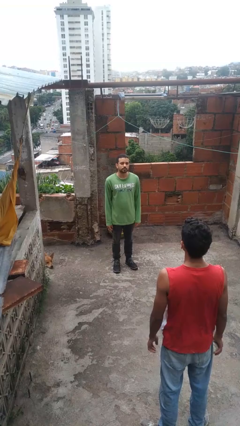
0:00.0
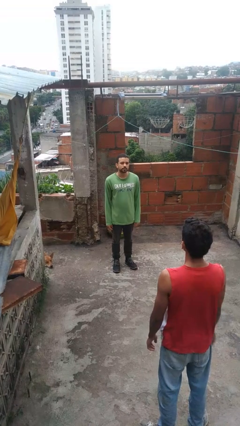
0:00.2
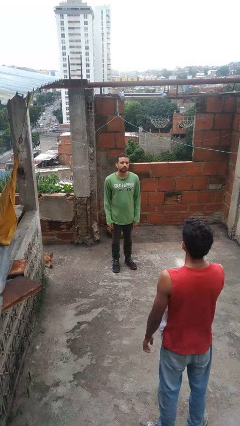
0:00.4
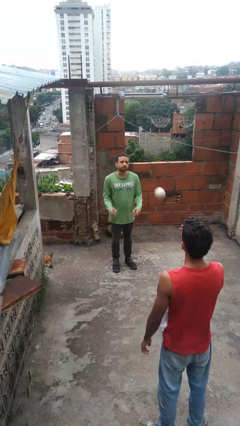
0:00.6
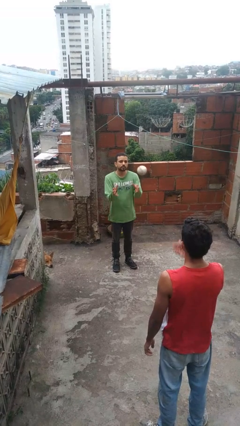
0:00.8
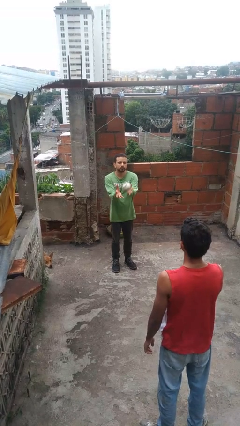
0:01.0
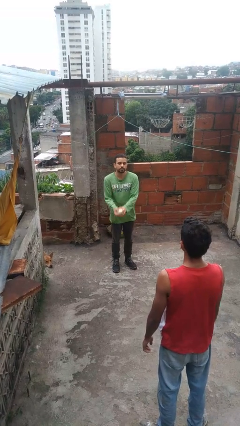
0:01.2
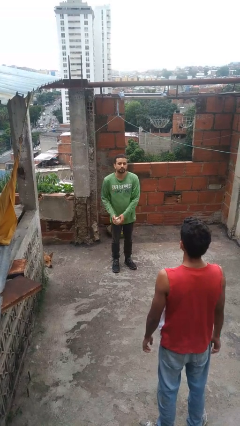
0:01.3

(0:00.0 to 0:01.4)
person catches object from person

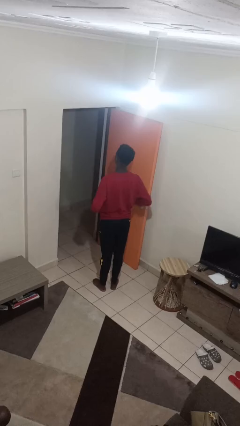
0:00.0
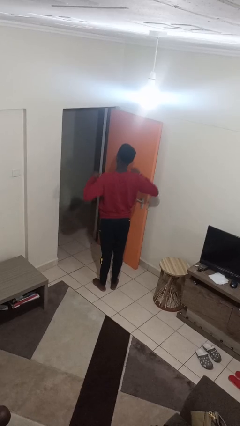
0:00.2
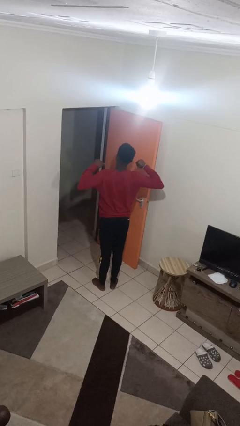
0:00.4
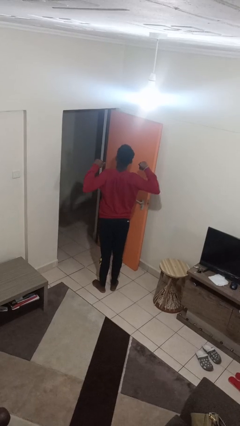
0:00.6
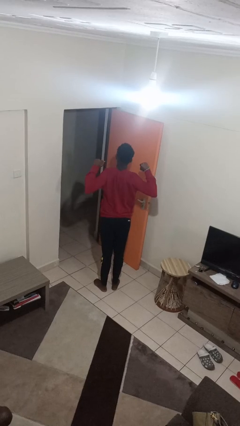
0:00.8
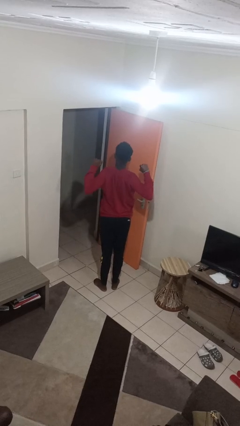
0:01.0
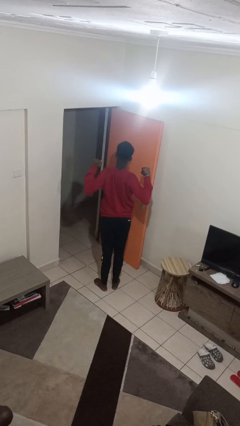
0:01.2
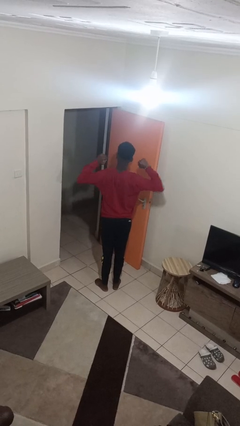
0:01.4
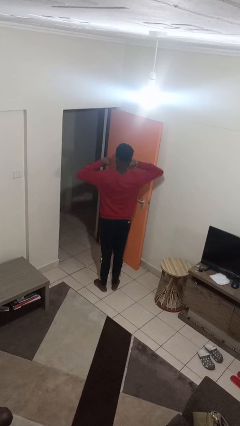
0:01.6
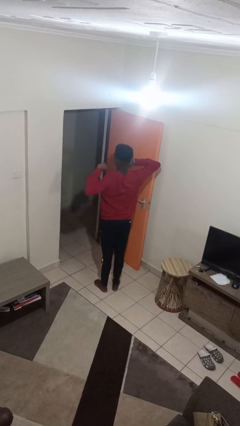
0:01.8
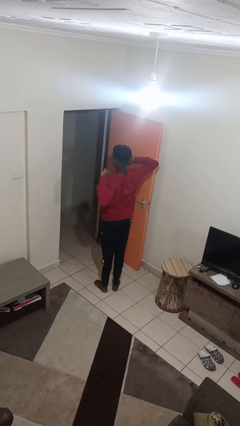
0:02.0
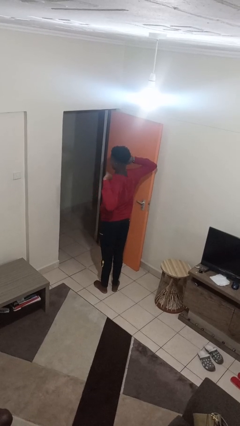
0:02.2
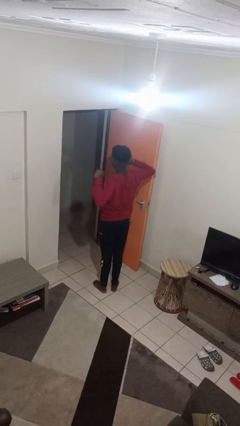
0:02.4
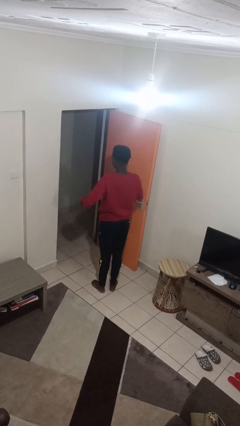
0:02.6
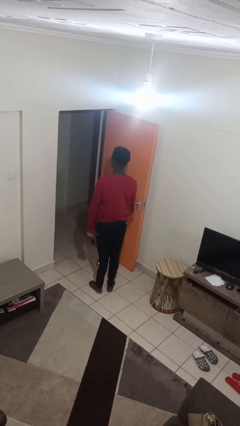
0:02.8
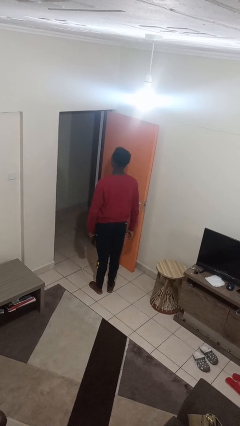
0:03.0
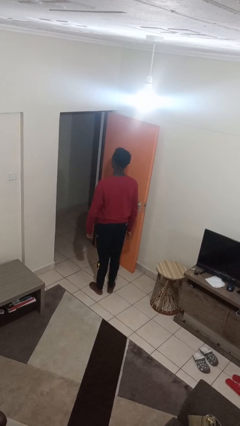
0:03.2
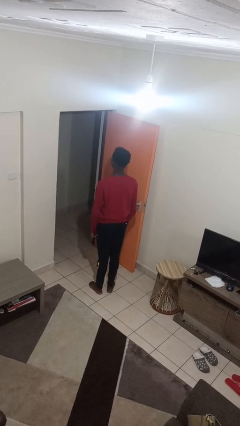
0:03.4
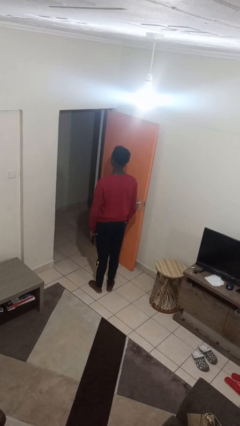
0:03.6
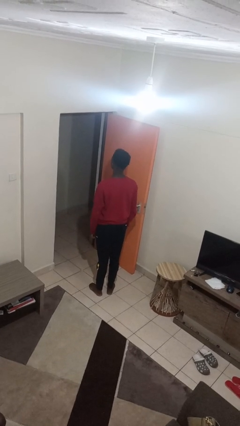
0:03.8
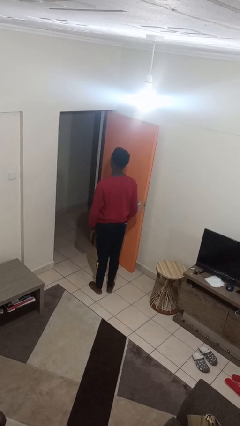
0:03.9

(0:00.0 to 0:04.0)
person stretches arms to side

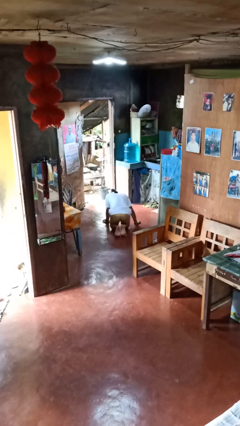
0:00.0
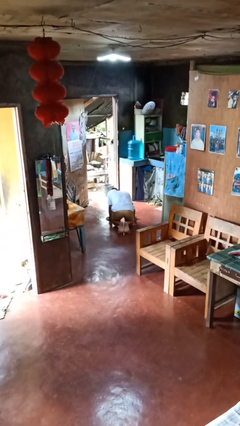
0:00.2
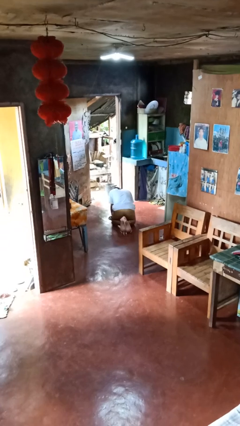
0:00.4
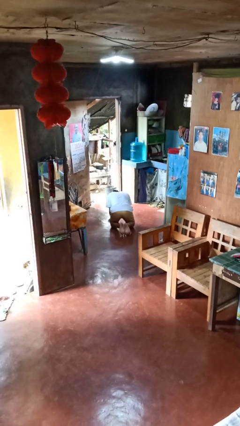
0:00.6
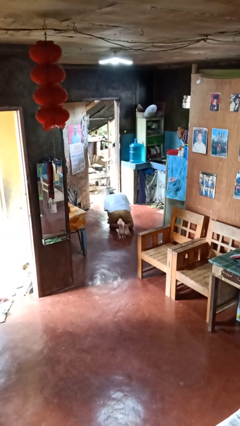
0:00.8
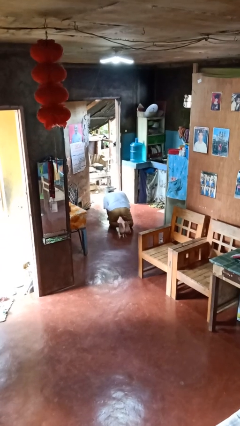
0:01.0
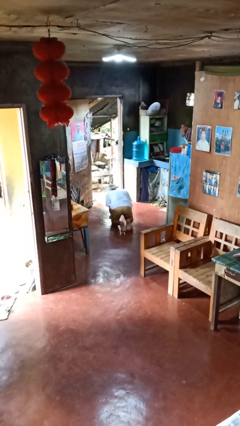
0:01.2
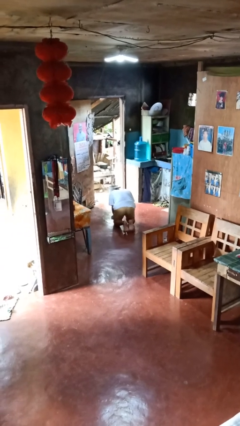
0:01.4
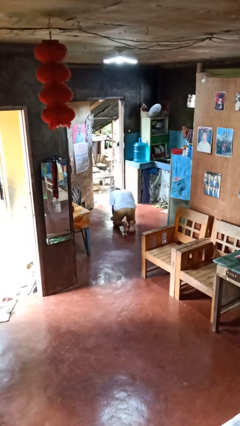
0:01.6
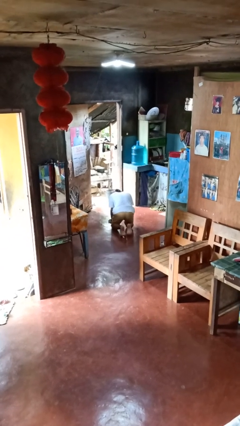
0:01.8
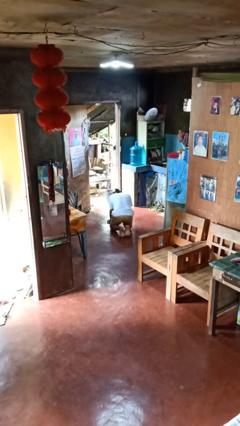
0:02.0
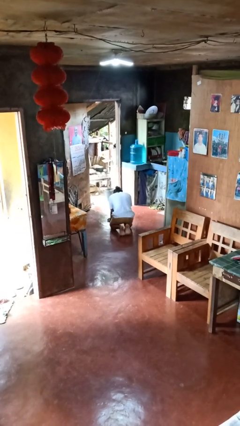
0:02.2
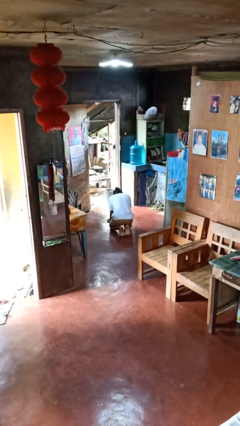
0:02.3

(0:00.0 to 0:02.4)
person crawls

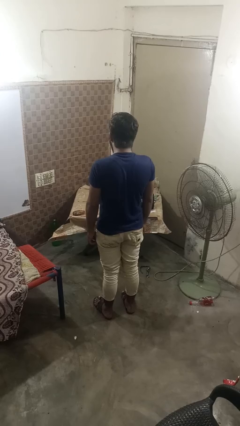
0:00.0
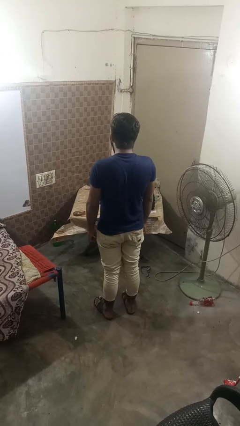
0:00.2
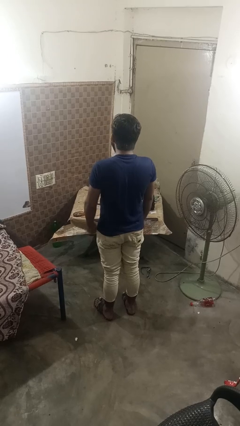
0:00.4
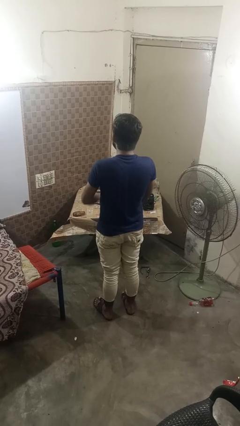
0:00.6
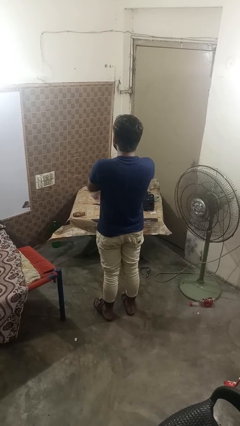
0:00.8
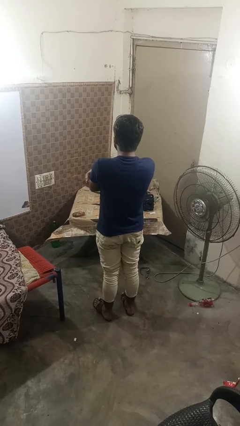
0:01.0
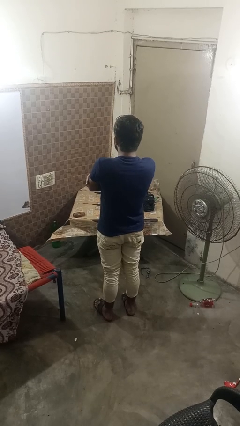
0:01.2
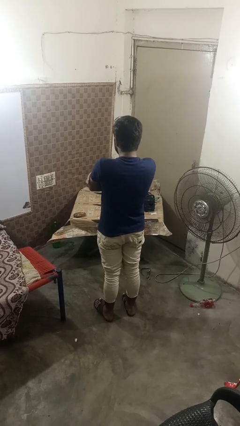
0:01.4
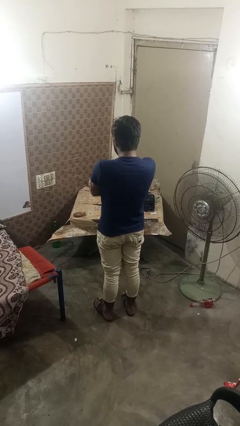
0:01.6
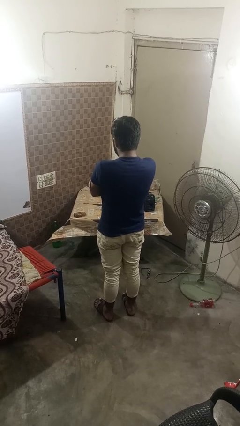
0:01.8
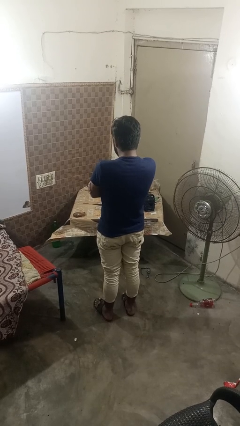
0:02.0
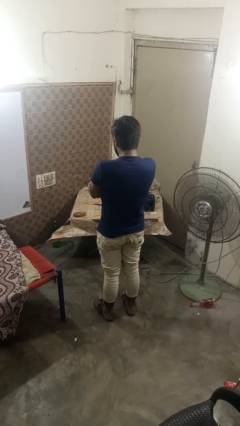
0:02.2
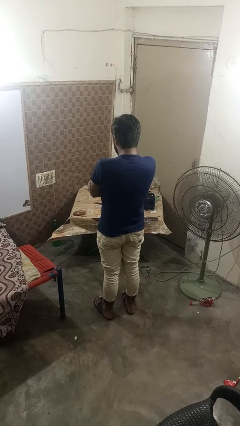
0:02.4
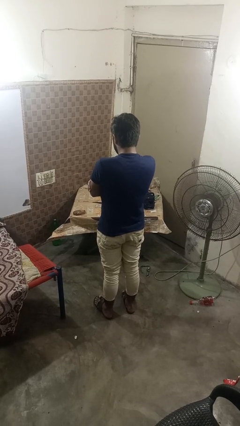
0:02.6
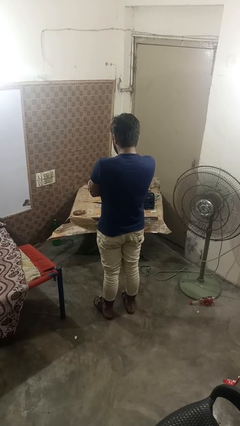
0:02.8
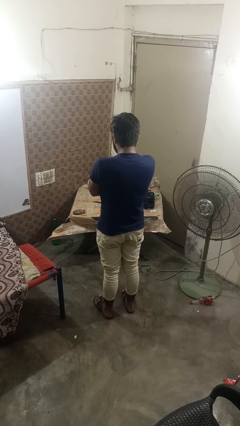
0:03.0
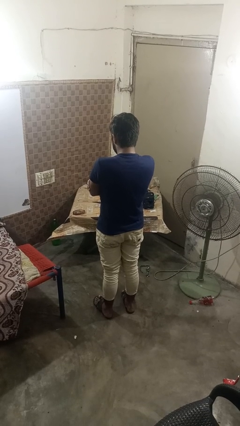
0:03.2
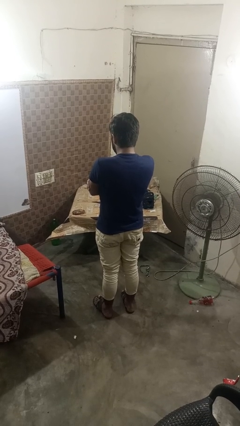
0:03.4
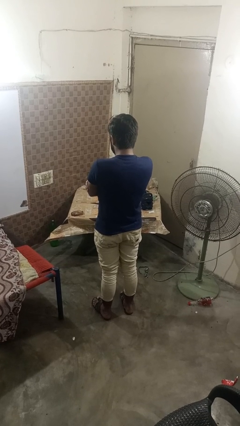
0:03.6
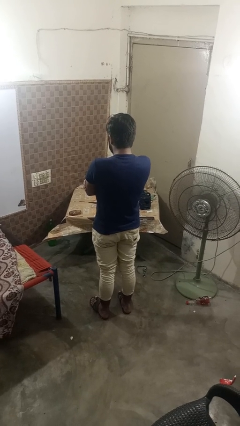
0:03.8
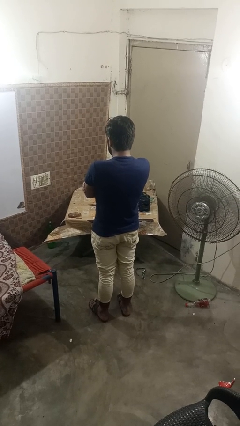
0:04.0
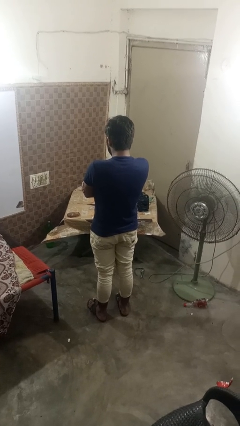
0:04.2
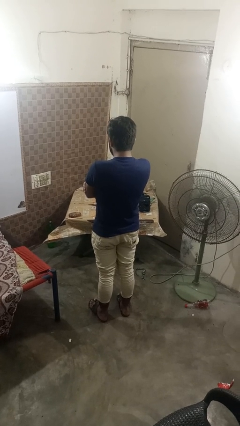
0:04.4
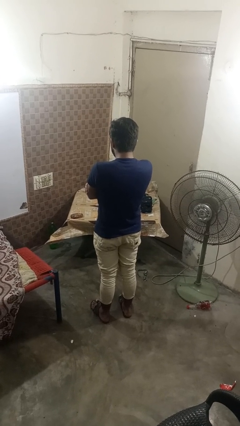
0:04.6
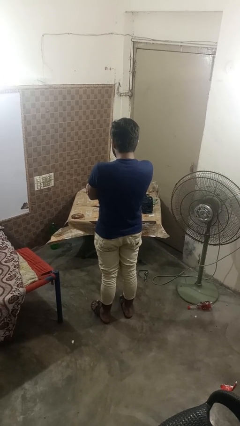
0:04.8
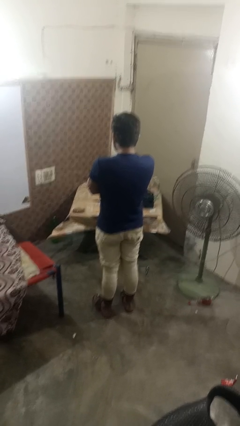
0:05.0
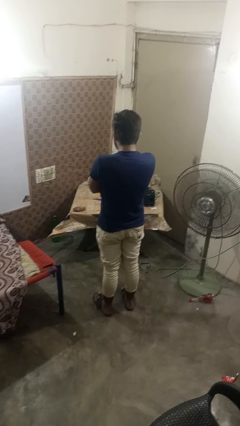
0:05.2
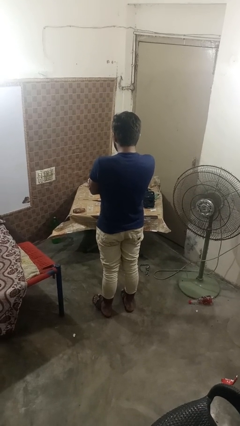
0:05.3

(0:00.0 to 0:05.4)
person crosses arms

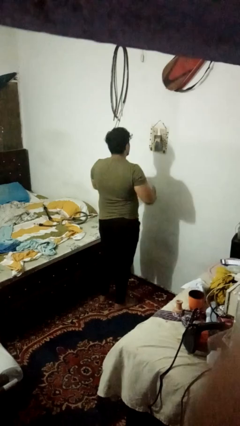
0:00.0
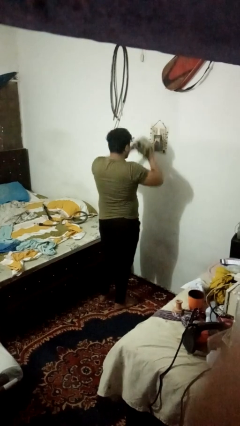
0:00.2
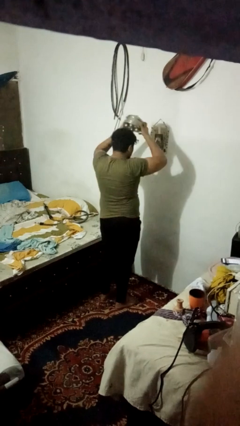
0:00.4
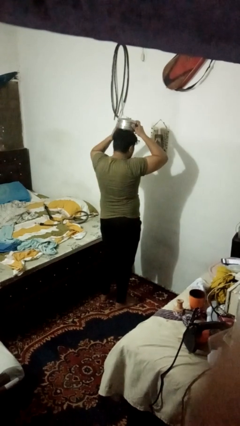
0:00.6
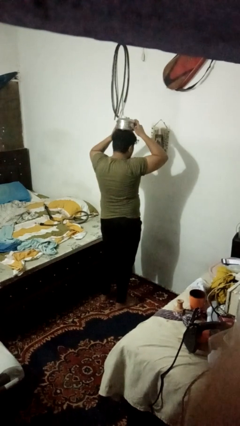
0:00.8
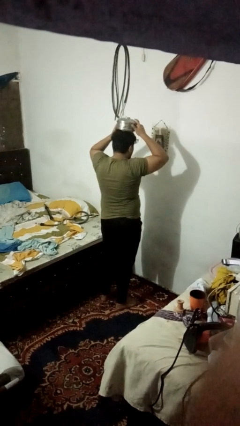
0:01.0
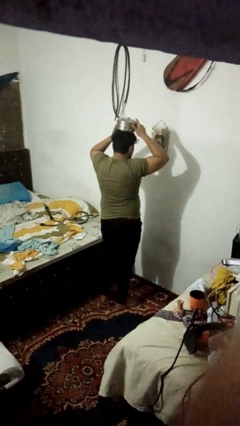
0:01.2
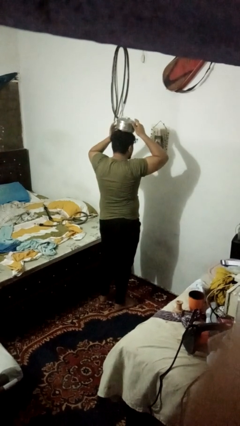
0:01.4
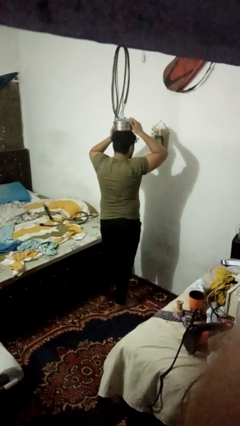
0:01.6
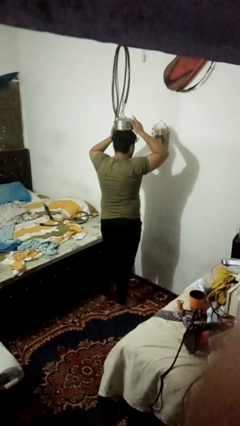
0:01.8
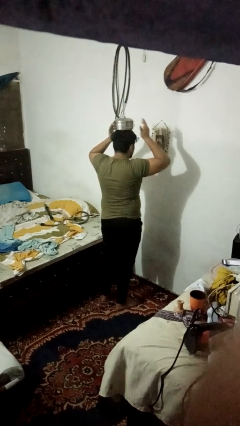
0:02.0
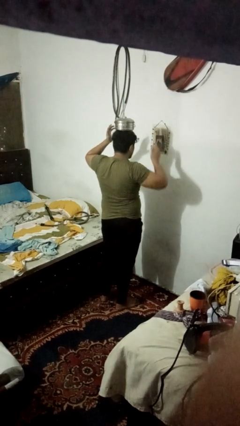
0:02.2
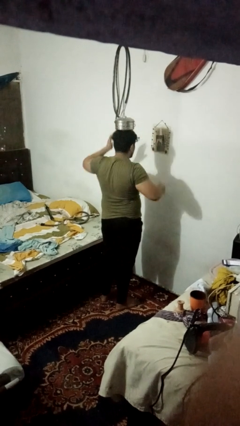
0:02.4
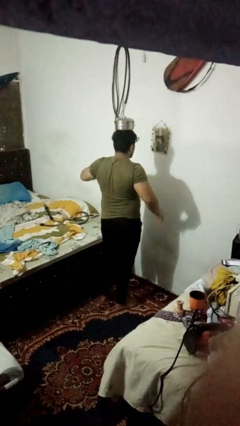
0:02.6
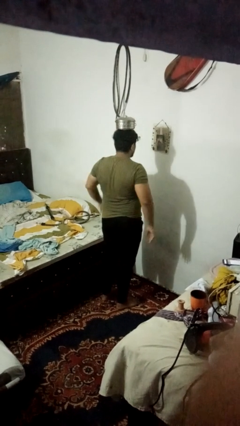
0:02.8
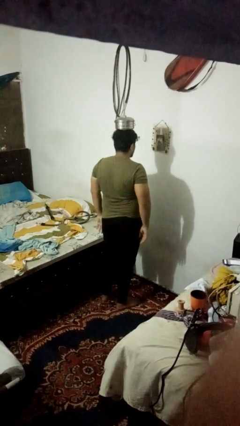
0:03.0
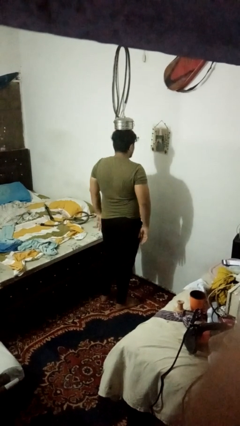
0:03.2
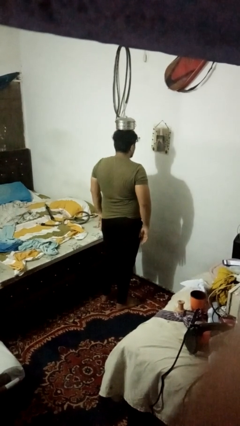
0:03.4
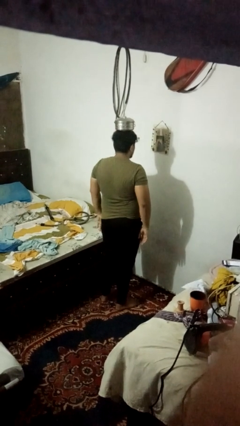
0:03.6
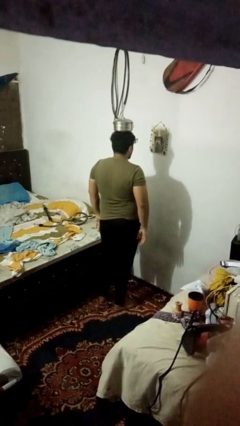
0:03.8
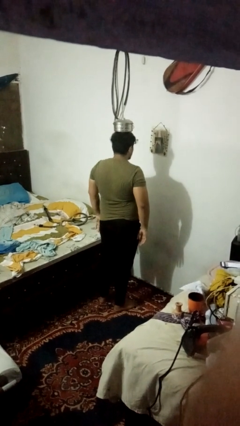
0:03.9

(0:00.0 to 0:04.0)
person holds object above head

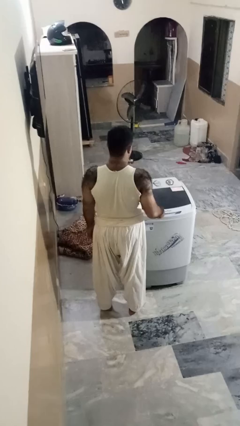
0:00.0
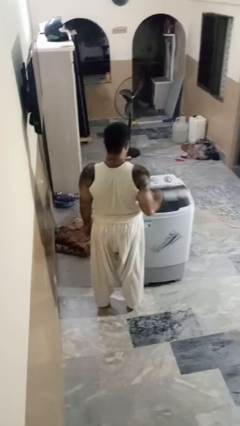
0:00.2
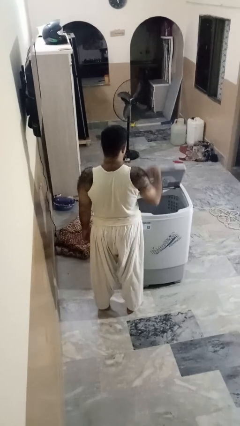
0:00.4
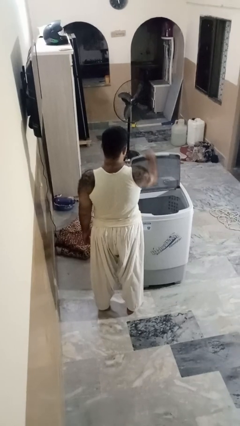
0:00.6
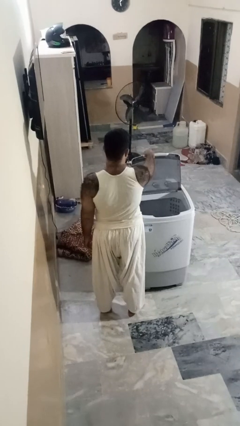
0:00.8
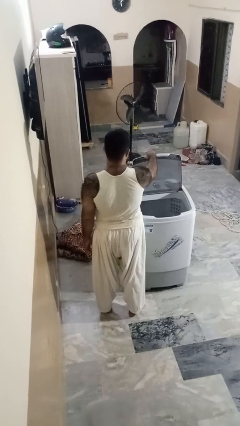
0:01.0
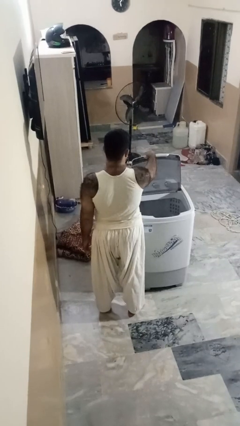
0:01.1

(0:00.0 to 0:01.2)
person opens clothes washer
